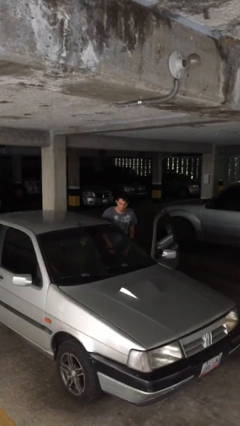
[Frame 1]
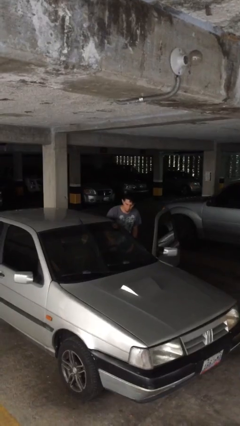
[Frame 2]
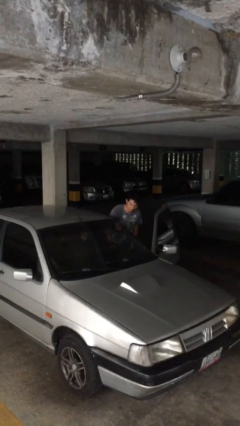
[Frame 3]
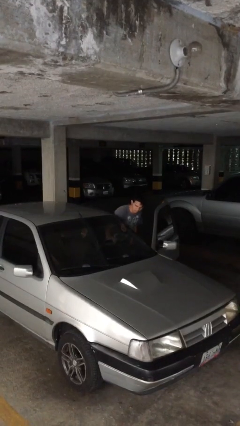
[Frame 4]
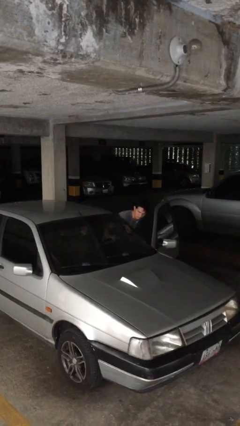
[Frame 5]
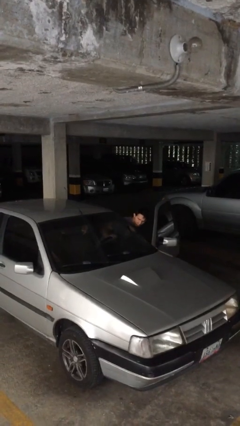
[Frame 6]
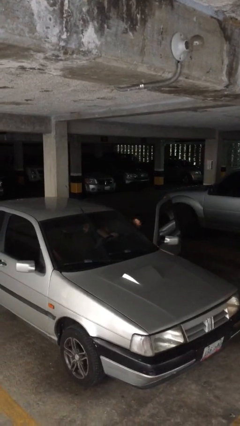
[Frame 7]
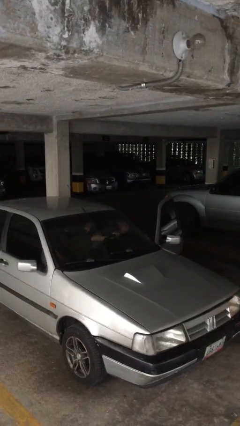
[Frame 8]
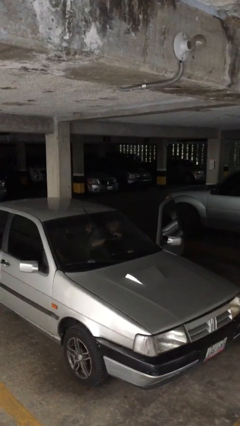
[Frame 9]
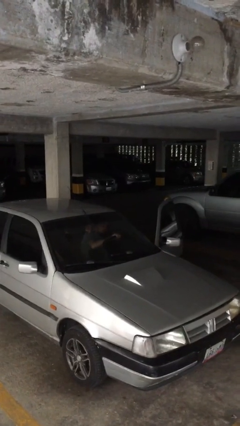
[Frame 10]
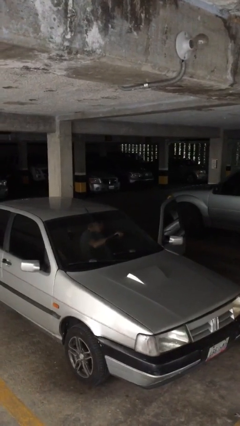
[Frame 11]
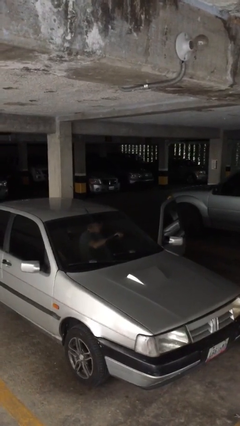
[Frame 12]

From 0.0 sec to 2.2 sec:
person enters car

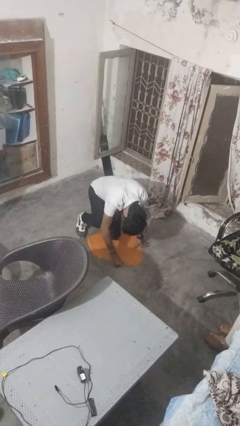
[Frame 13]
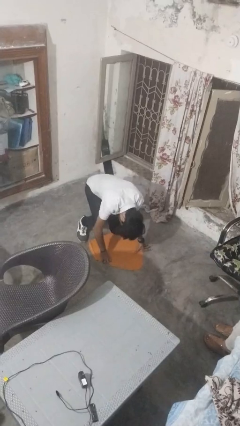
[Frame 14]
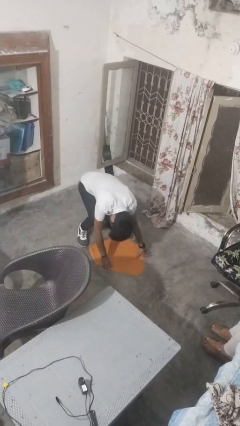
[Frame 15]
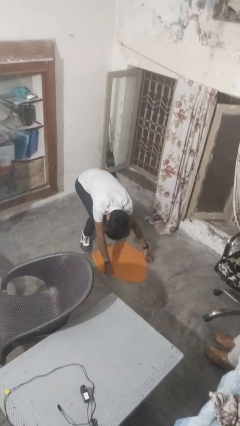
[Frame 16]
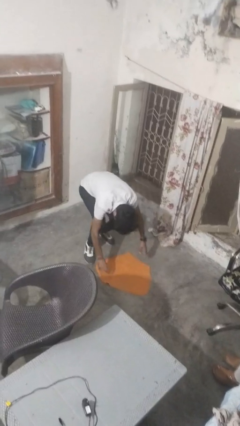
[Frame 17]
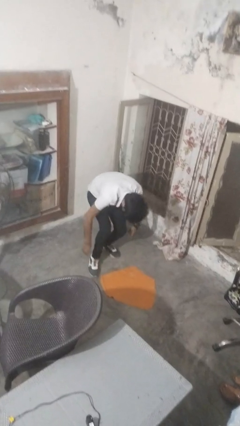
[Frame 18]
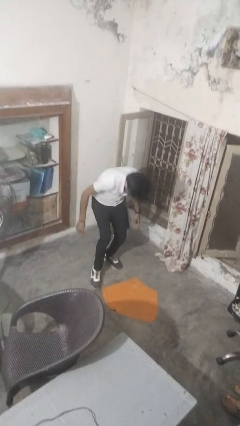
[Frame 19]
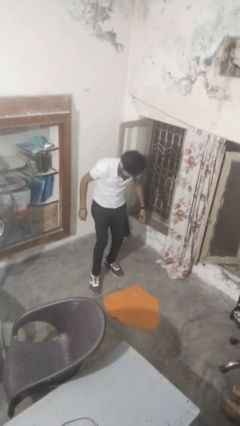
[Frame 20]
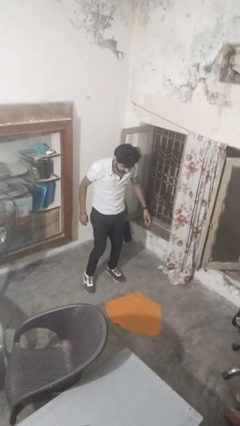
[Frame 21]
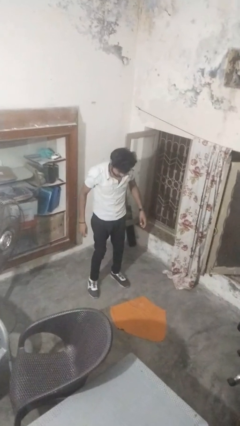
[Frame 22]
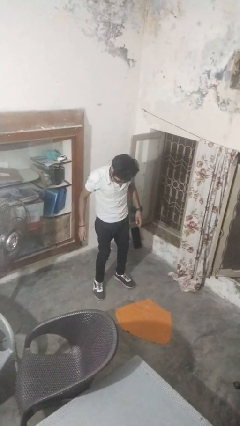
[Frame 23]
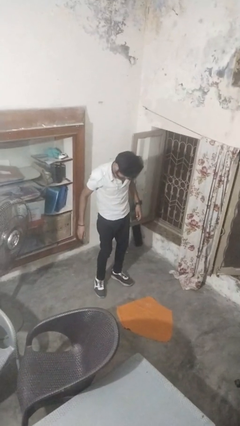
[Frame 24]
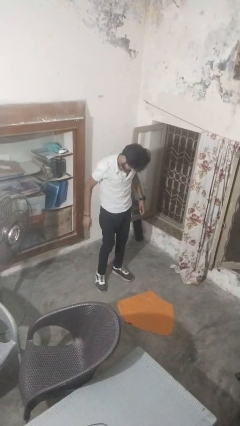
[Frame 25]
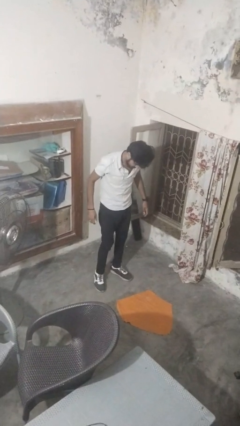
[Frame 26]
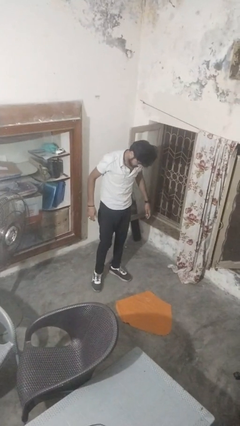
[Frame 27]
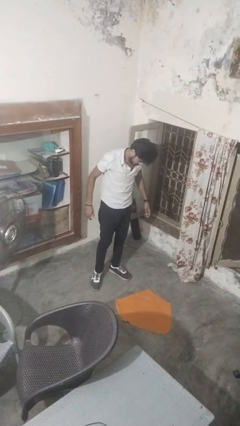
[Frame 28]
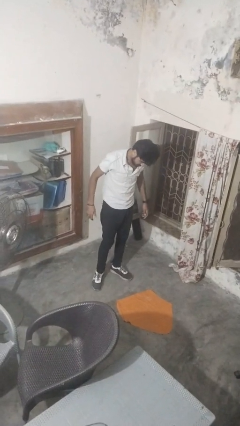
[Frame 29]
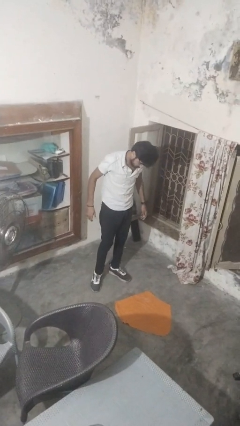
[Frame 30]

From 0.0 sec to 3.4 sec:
person stands up from floor

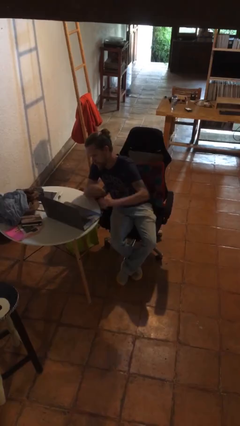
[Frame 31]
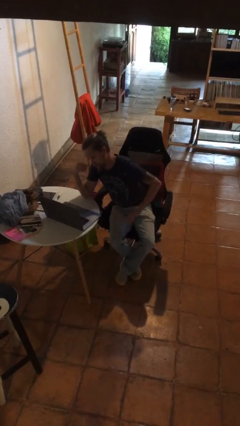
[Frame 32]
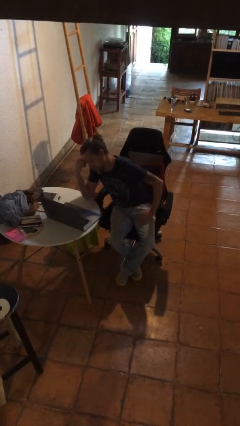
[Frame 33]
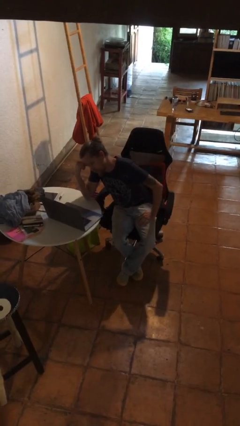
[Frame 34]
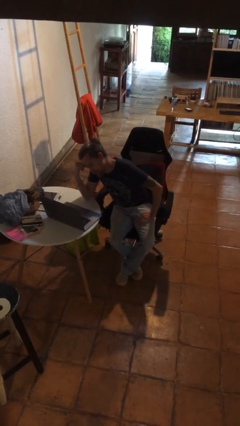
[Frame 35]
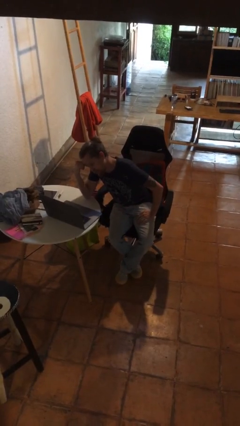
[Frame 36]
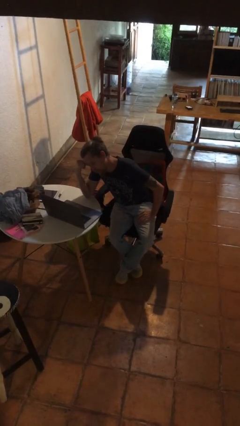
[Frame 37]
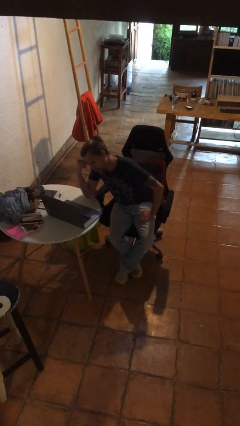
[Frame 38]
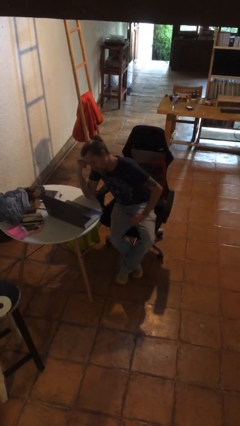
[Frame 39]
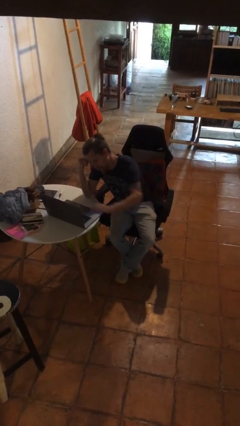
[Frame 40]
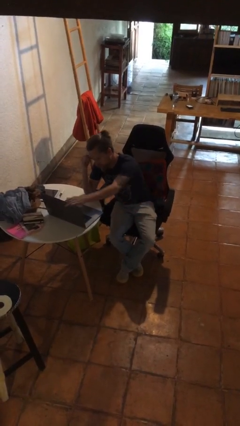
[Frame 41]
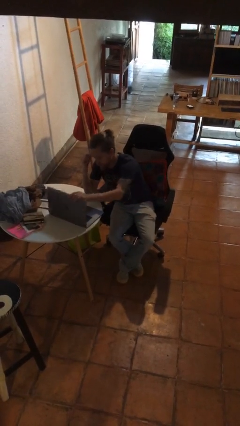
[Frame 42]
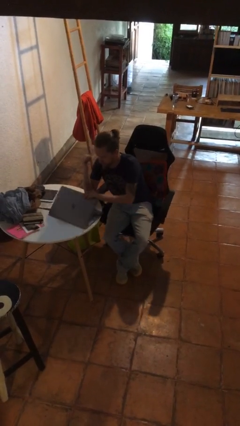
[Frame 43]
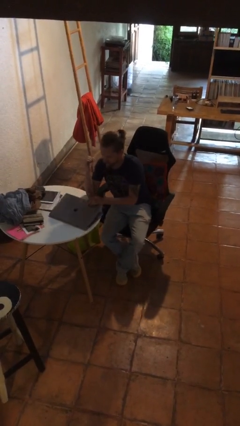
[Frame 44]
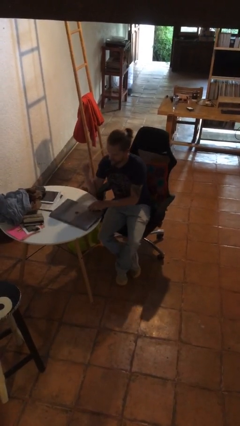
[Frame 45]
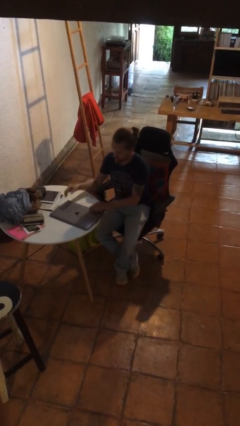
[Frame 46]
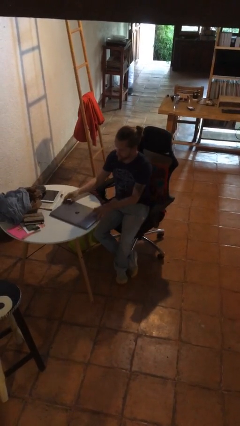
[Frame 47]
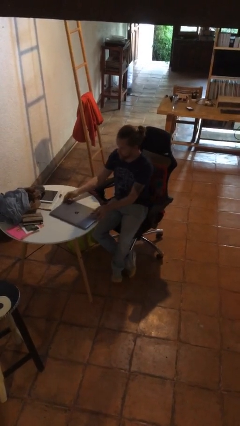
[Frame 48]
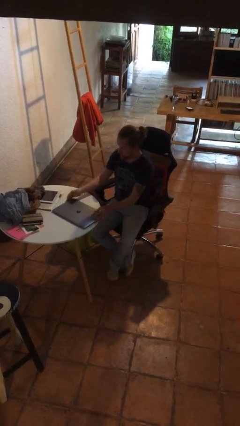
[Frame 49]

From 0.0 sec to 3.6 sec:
person closes laptop

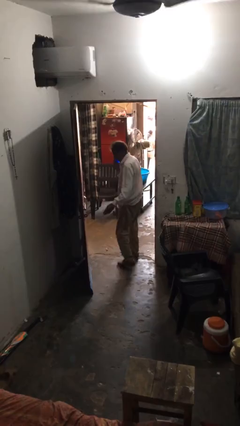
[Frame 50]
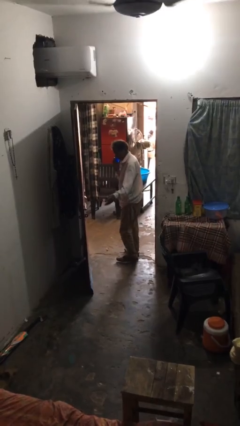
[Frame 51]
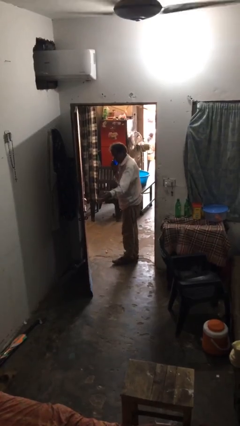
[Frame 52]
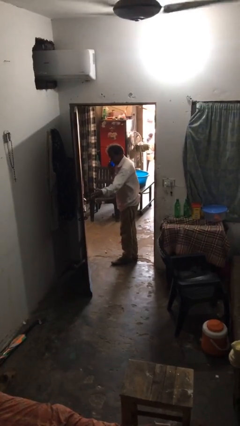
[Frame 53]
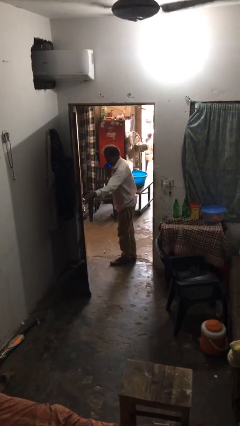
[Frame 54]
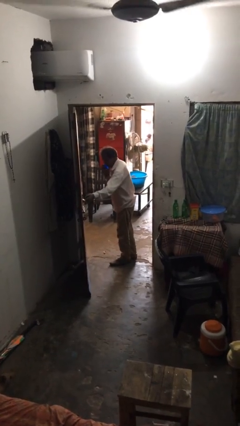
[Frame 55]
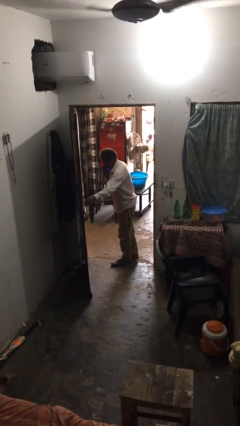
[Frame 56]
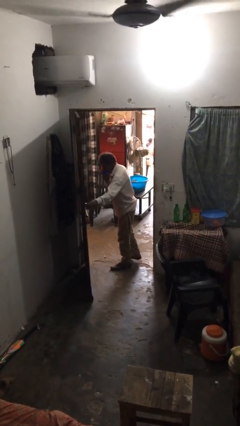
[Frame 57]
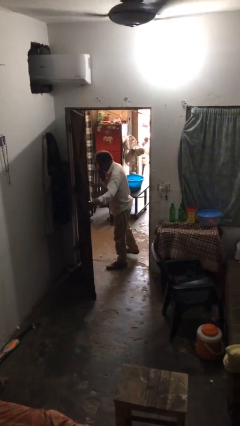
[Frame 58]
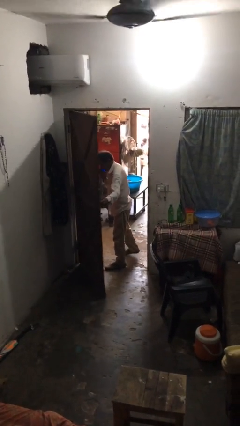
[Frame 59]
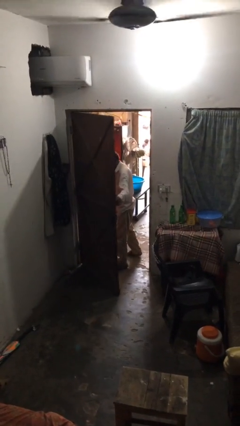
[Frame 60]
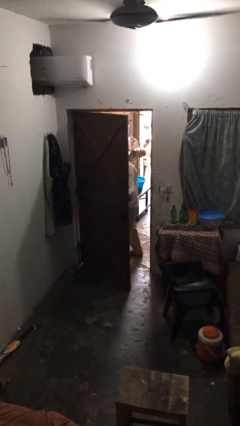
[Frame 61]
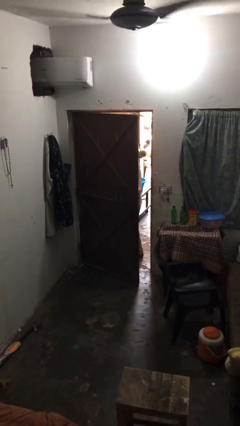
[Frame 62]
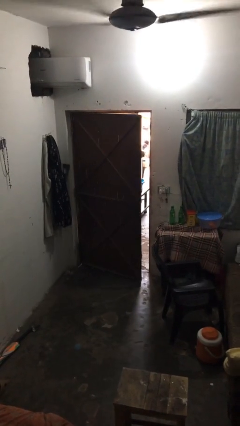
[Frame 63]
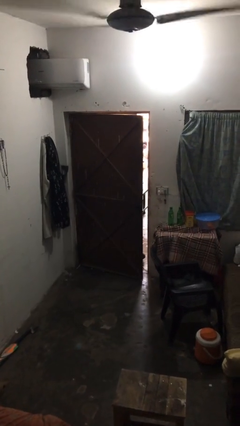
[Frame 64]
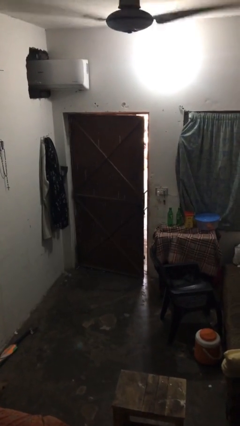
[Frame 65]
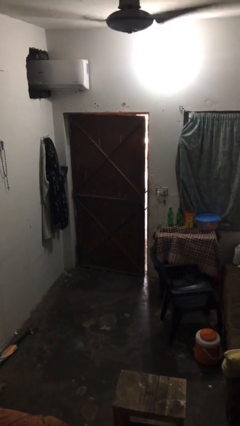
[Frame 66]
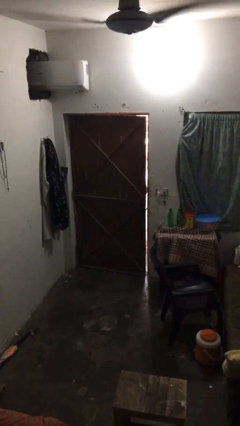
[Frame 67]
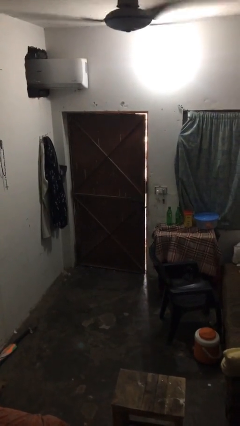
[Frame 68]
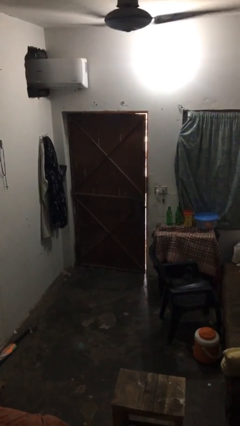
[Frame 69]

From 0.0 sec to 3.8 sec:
person closes facility door

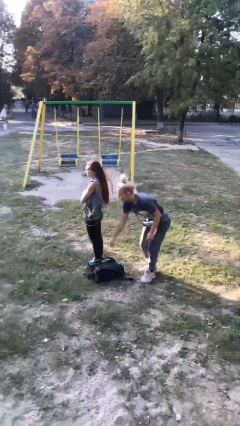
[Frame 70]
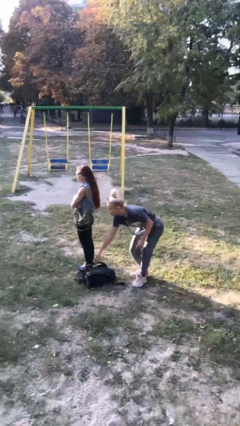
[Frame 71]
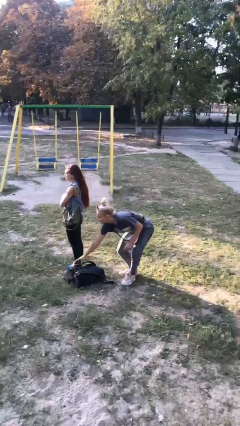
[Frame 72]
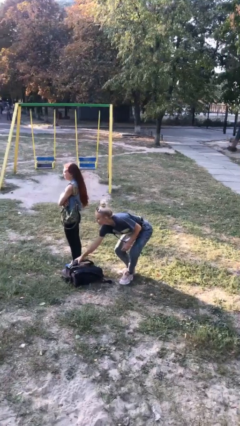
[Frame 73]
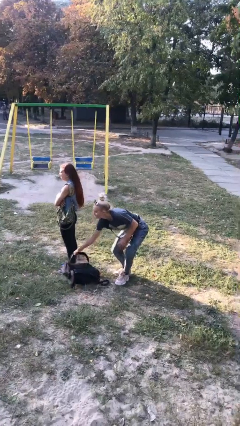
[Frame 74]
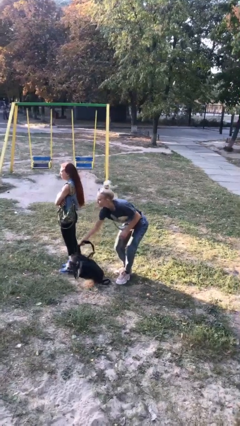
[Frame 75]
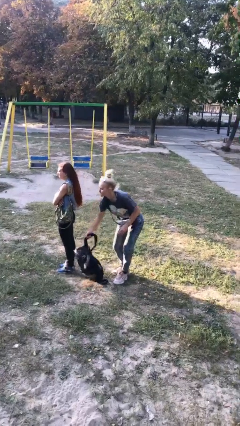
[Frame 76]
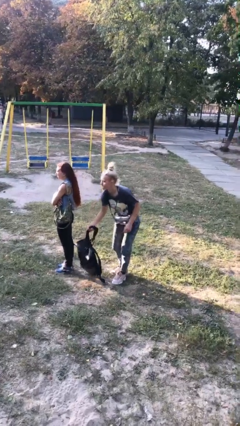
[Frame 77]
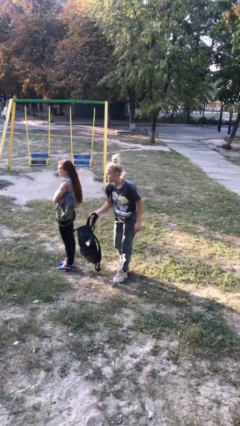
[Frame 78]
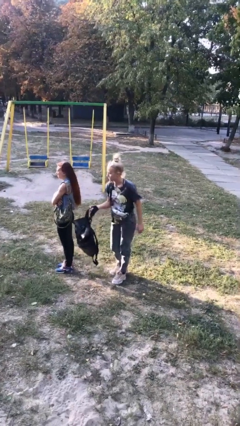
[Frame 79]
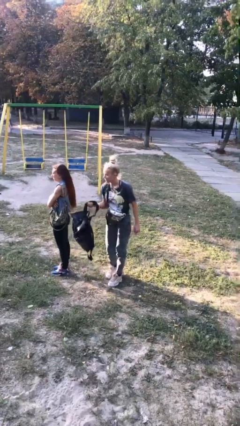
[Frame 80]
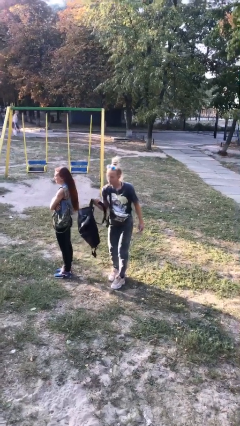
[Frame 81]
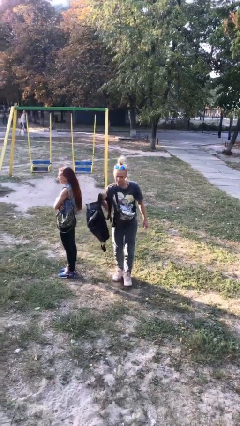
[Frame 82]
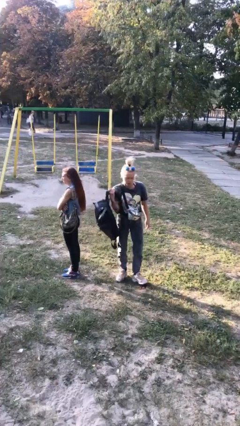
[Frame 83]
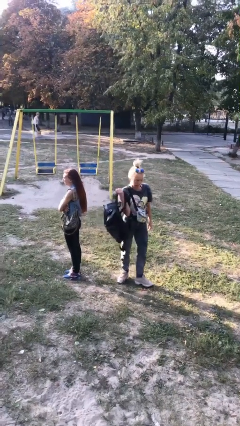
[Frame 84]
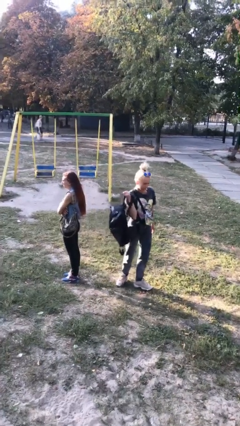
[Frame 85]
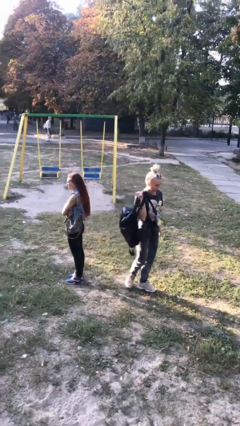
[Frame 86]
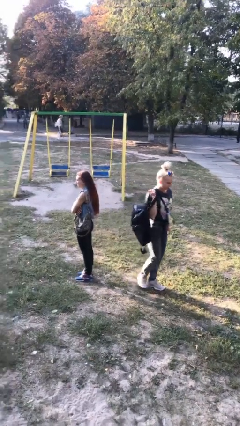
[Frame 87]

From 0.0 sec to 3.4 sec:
person steals object from person

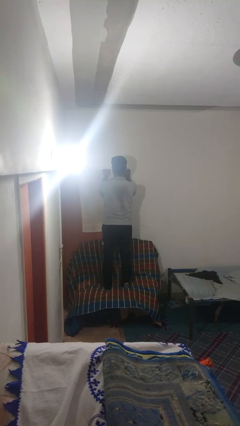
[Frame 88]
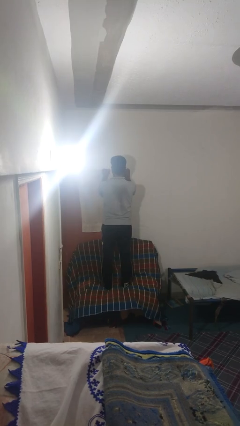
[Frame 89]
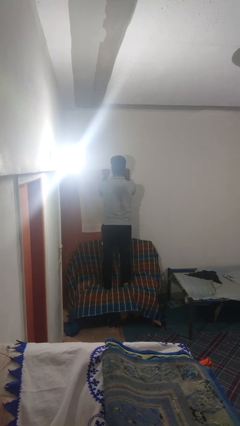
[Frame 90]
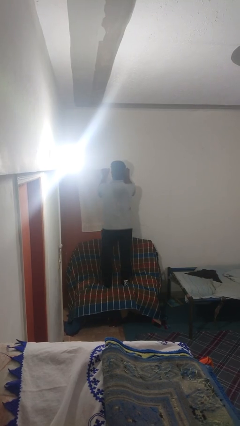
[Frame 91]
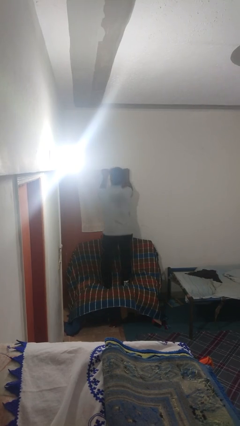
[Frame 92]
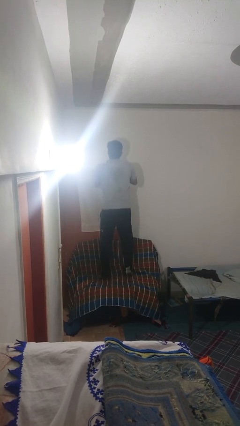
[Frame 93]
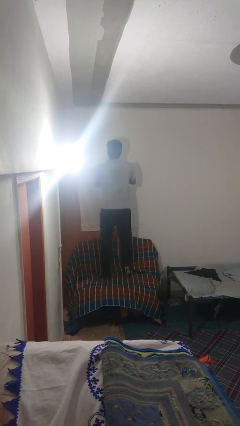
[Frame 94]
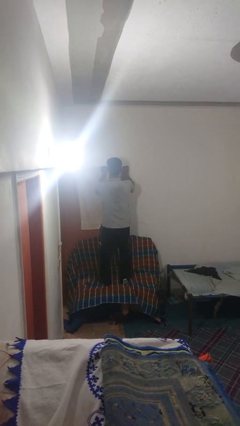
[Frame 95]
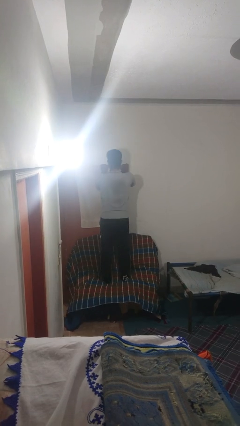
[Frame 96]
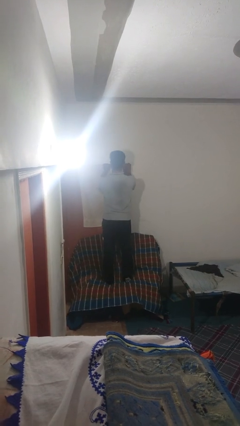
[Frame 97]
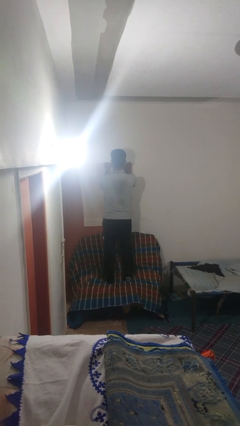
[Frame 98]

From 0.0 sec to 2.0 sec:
person jumps on couch
